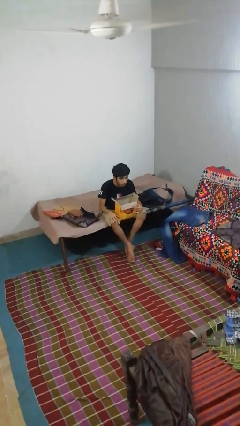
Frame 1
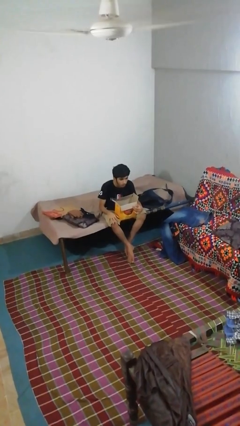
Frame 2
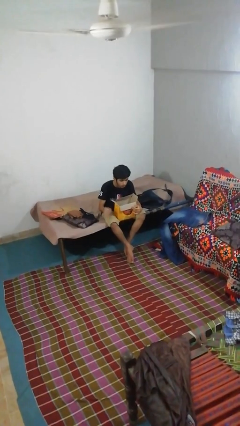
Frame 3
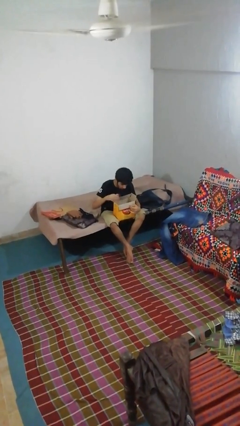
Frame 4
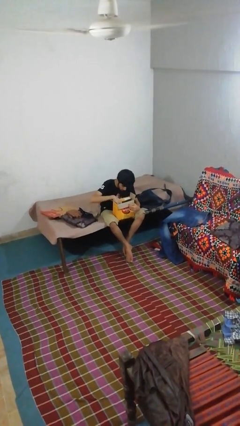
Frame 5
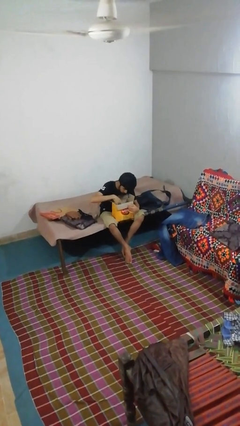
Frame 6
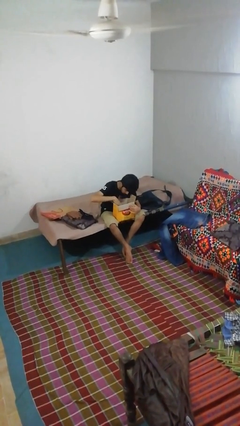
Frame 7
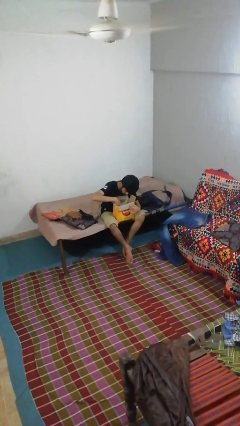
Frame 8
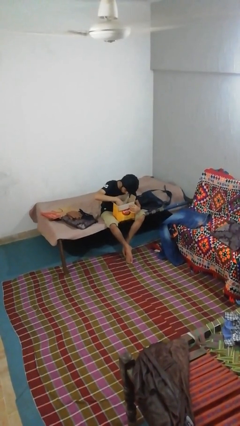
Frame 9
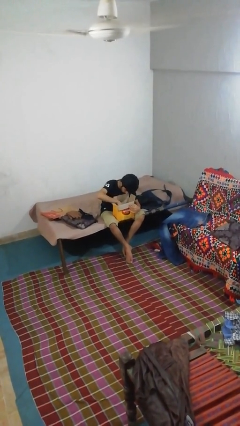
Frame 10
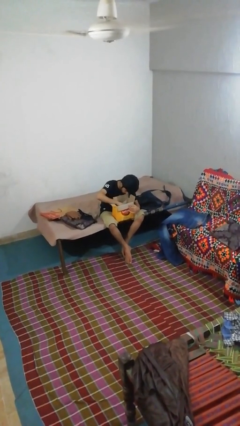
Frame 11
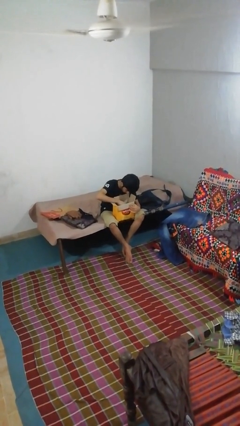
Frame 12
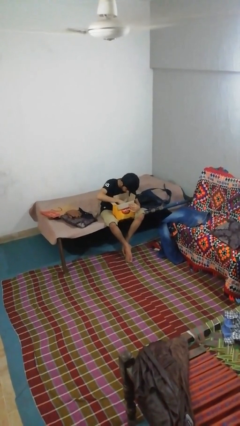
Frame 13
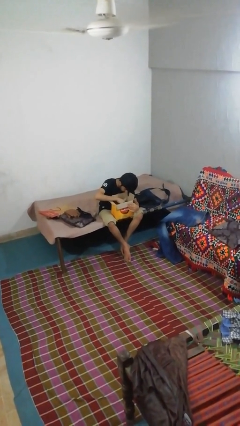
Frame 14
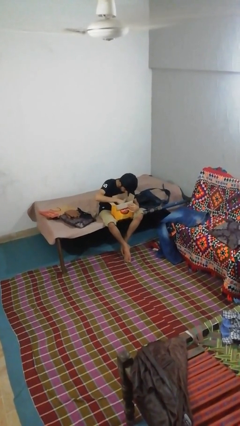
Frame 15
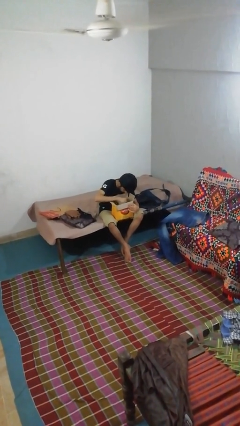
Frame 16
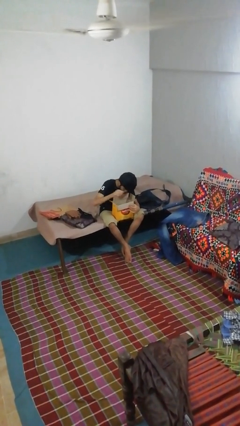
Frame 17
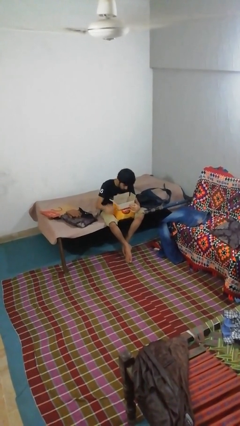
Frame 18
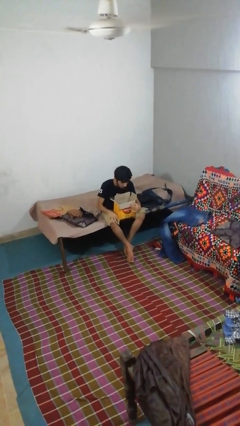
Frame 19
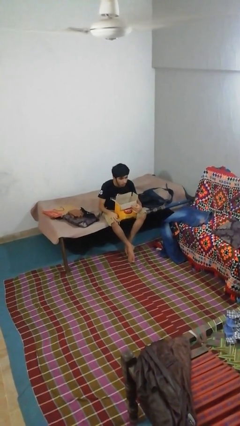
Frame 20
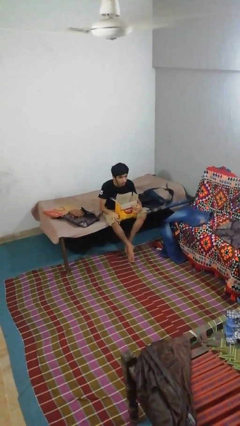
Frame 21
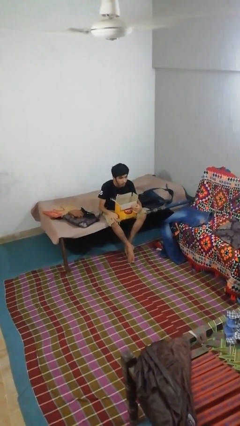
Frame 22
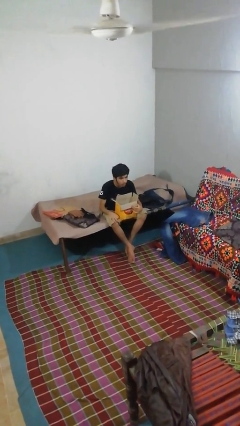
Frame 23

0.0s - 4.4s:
person searches in box

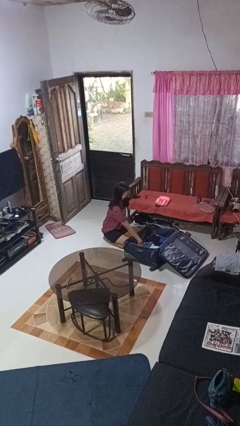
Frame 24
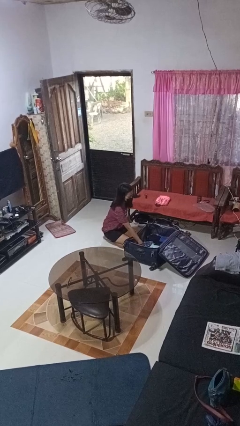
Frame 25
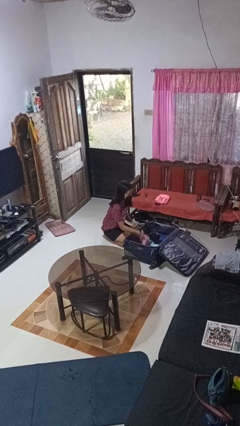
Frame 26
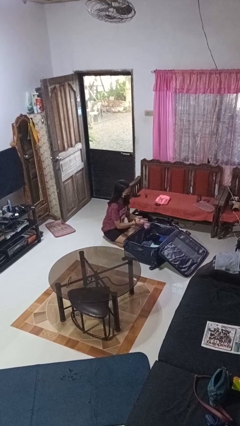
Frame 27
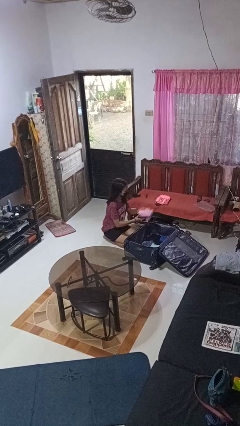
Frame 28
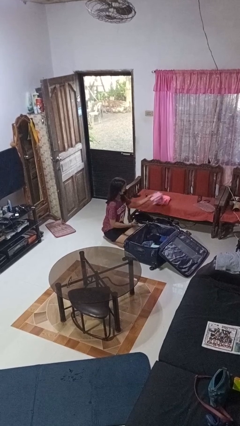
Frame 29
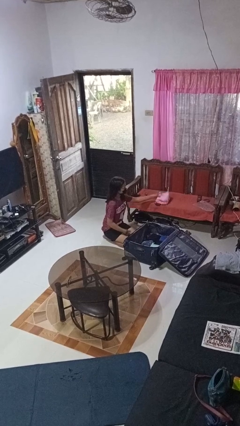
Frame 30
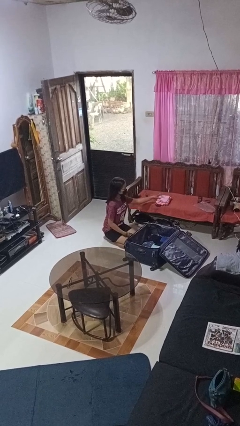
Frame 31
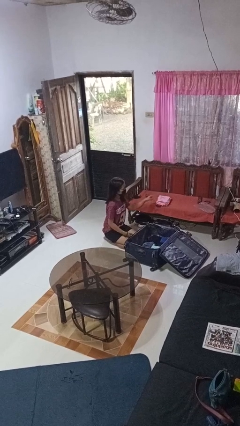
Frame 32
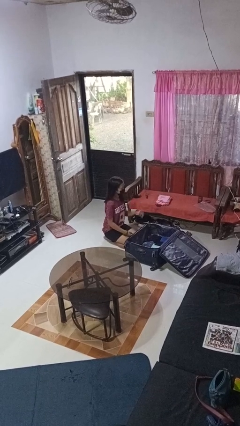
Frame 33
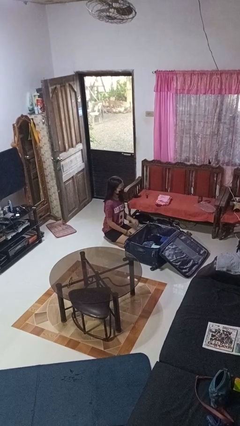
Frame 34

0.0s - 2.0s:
person unloads clothes from suitcase

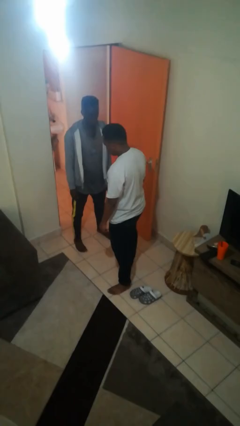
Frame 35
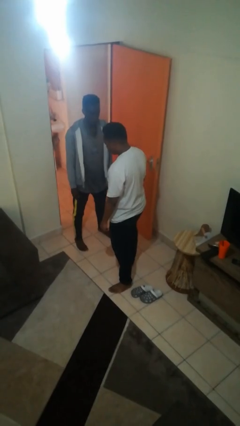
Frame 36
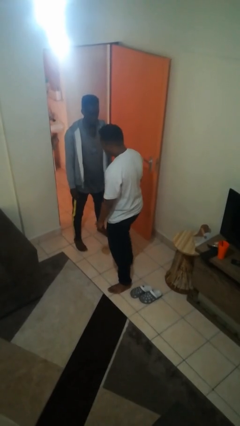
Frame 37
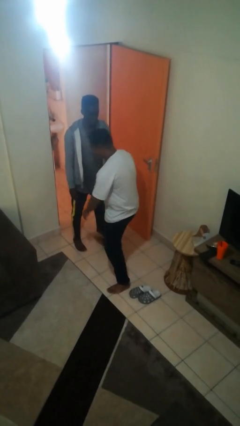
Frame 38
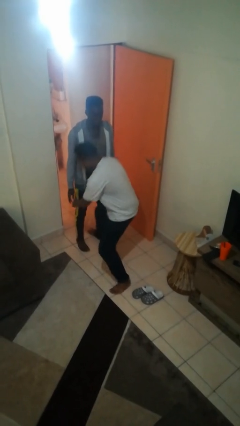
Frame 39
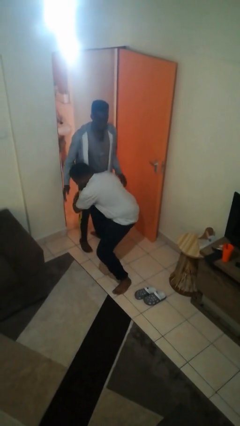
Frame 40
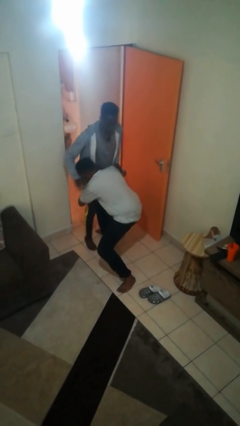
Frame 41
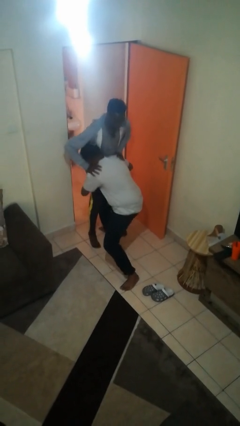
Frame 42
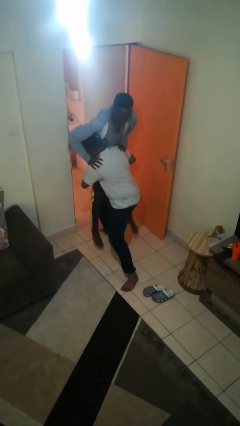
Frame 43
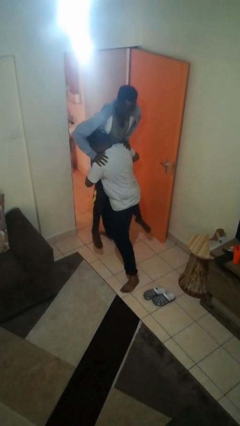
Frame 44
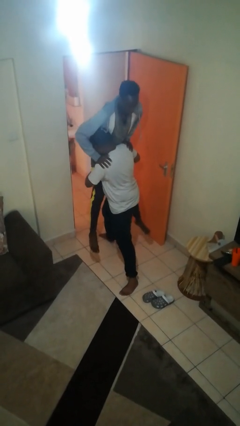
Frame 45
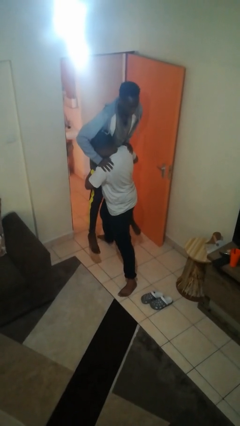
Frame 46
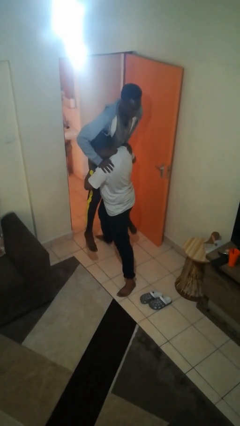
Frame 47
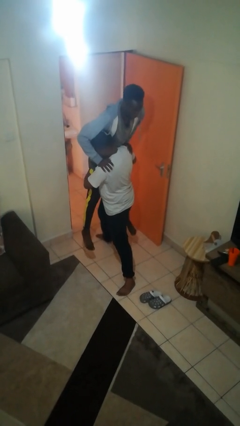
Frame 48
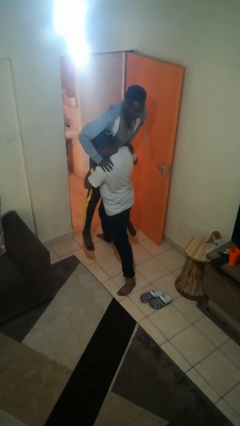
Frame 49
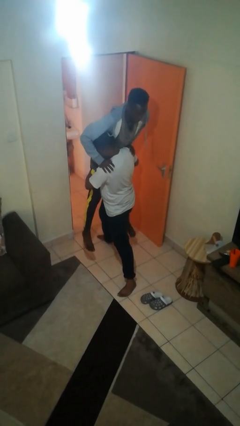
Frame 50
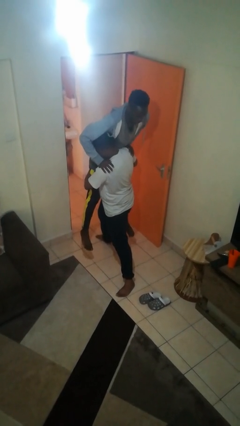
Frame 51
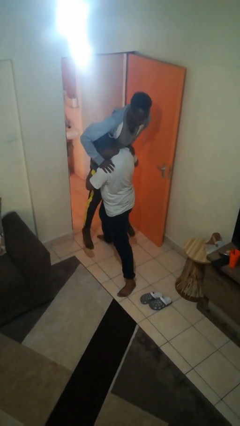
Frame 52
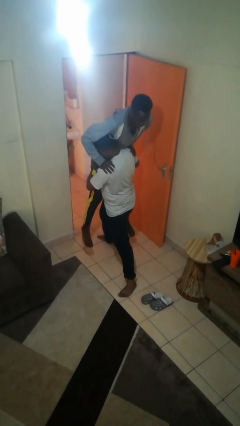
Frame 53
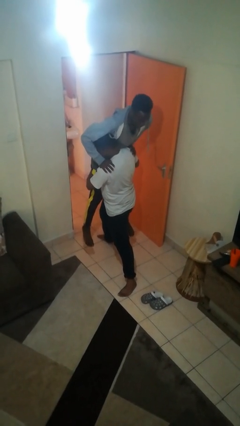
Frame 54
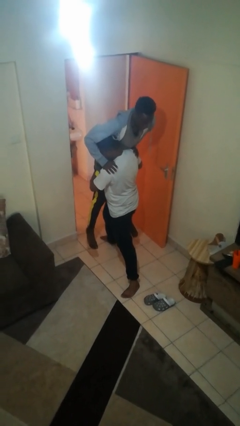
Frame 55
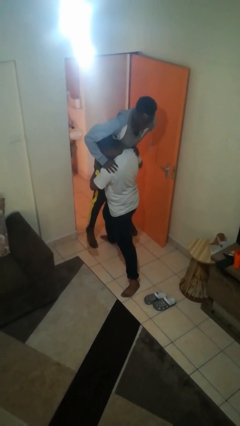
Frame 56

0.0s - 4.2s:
person picks up person

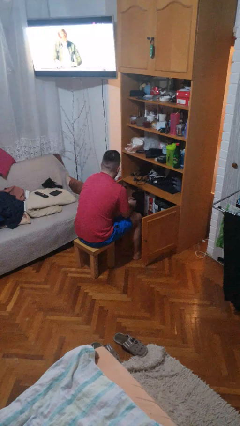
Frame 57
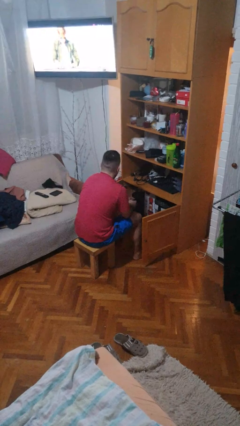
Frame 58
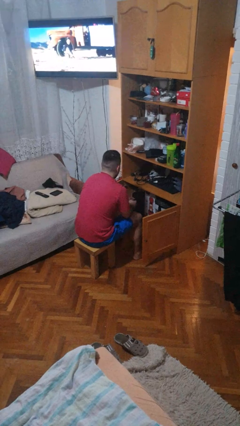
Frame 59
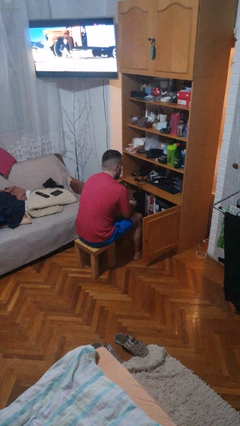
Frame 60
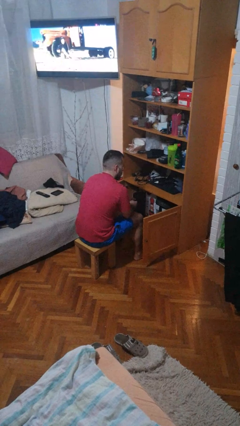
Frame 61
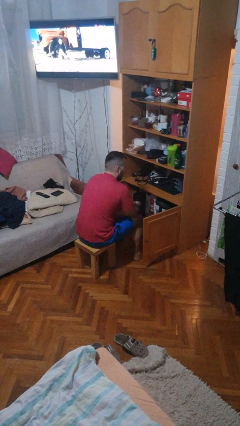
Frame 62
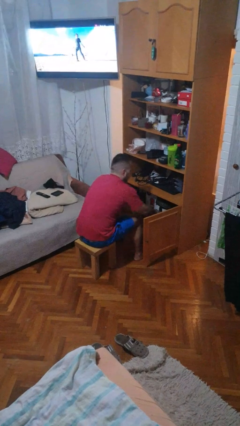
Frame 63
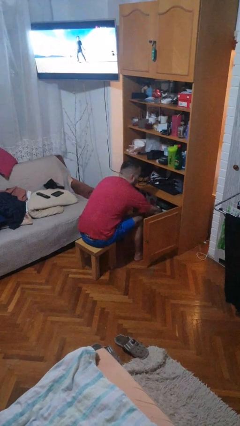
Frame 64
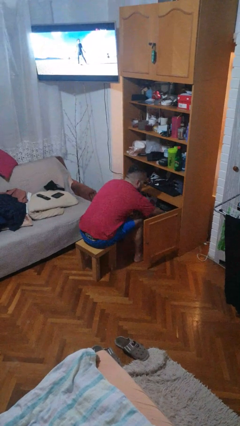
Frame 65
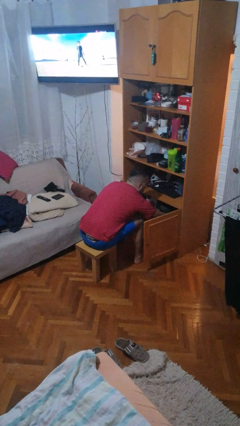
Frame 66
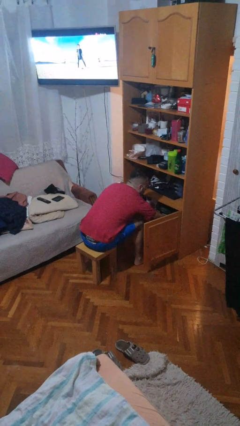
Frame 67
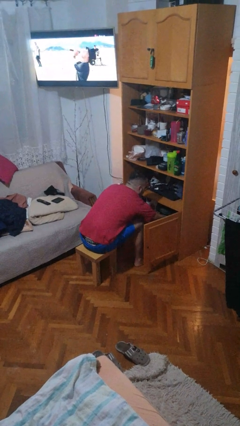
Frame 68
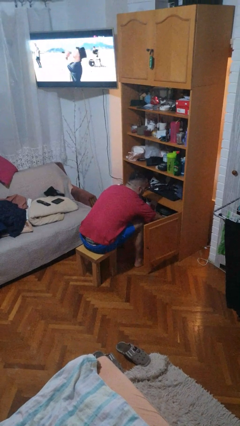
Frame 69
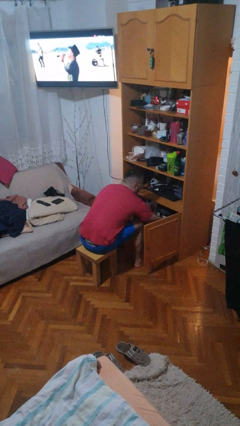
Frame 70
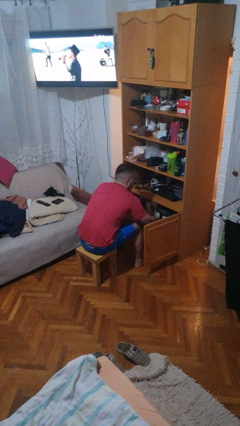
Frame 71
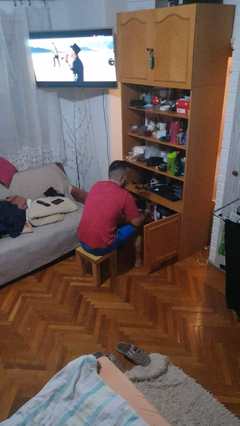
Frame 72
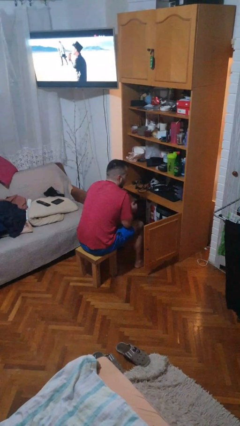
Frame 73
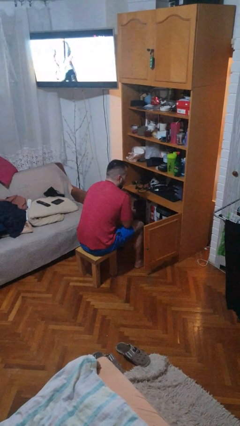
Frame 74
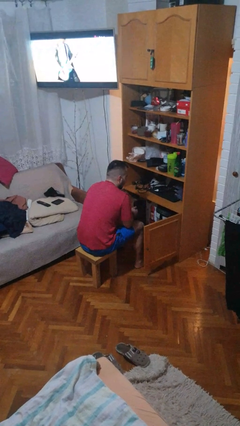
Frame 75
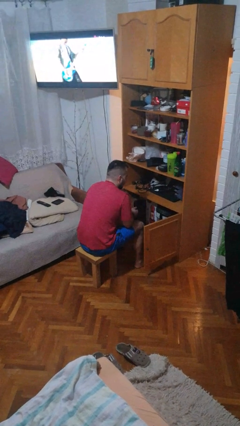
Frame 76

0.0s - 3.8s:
person searches in cabinet

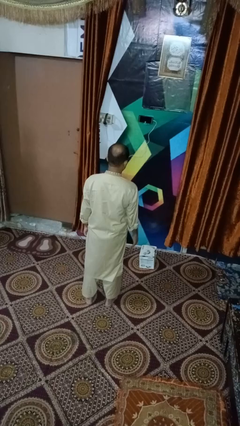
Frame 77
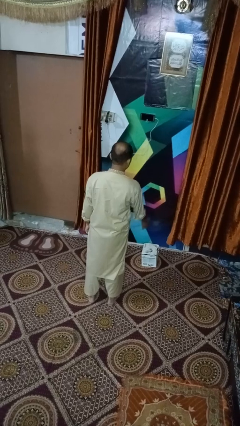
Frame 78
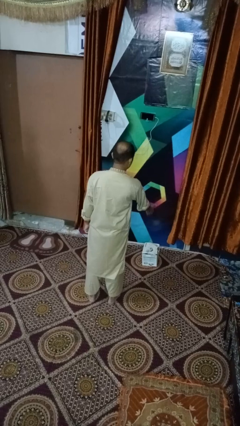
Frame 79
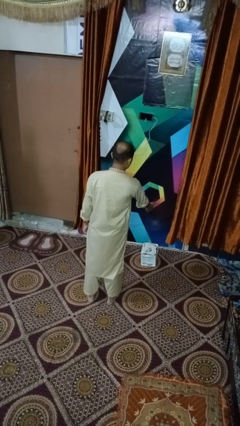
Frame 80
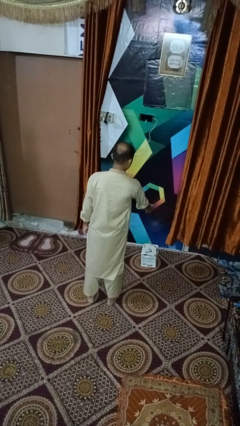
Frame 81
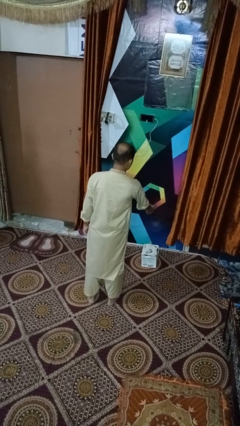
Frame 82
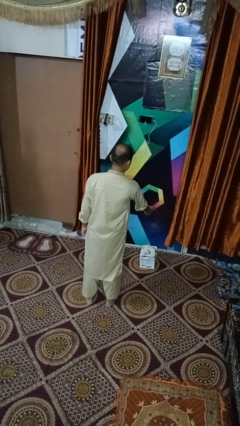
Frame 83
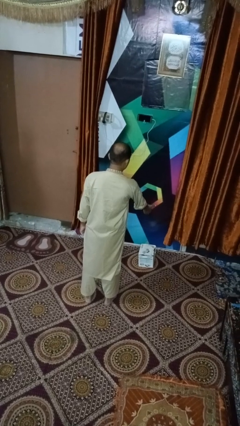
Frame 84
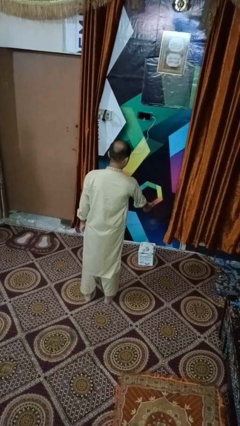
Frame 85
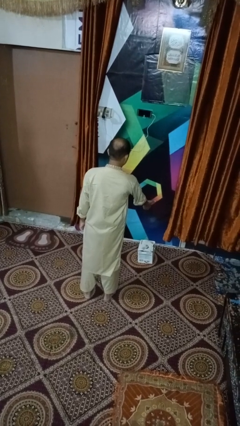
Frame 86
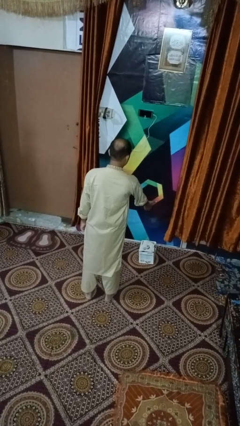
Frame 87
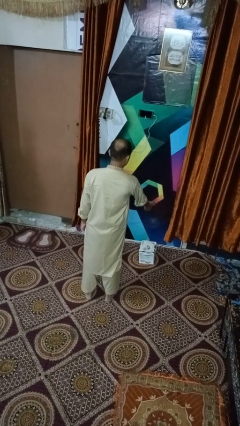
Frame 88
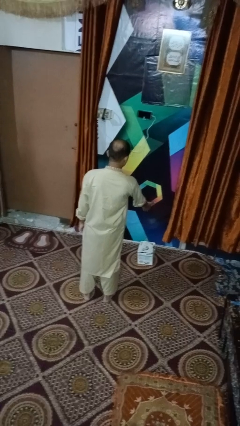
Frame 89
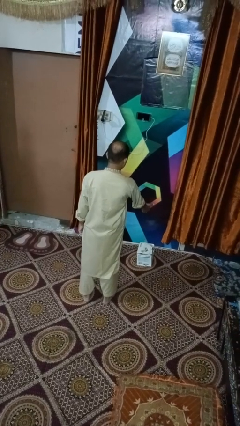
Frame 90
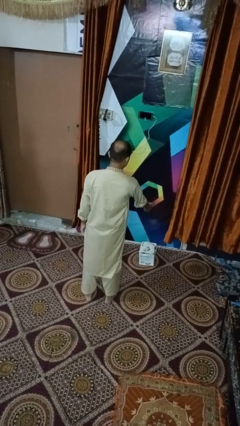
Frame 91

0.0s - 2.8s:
person waves hand over object
